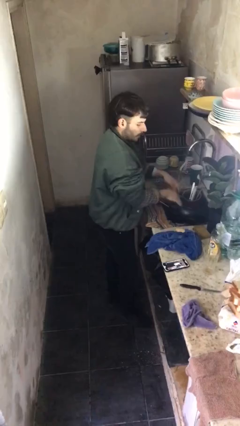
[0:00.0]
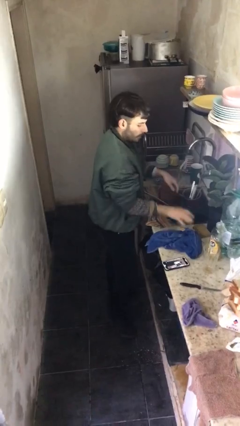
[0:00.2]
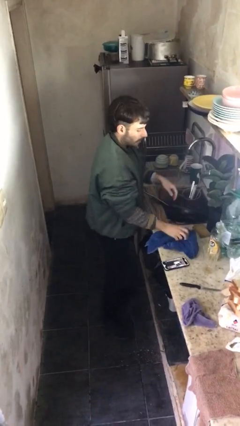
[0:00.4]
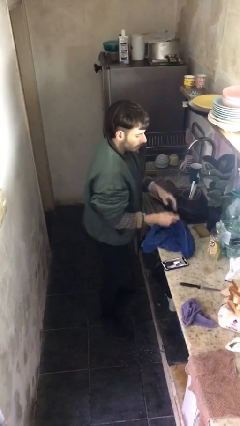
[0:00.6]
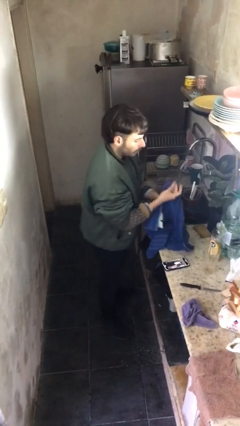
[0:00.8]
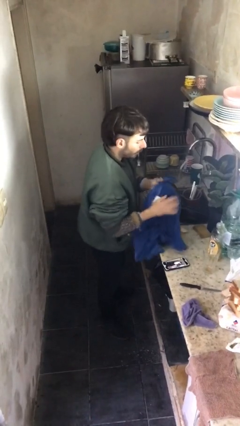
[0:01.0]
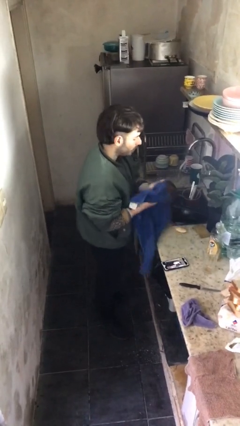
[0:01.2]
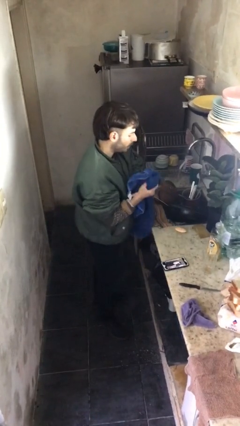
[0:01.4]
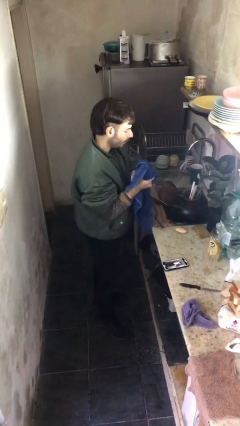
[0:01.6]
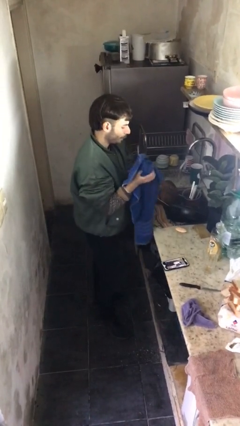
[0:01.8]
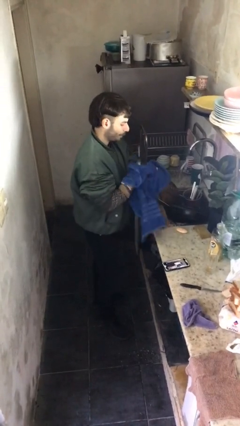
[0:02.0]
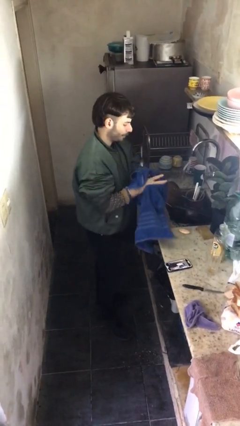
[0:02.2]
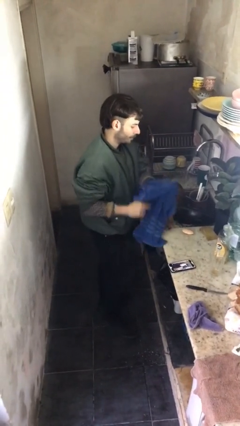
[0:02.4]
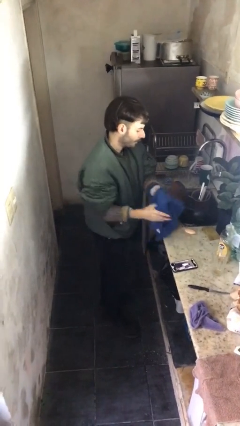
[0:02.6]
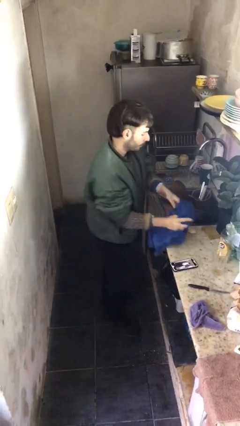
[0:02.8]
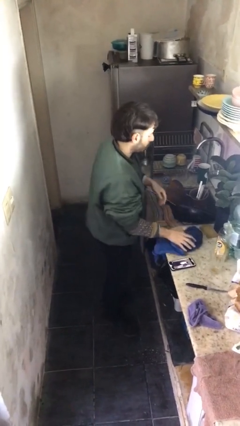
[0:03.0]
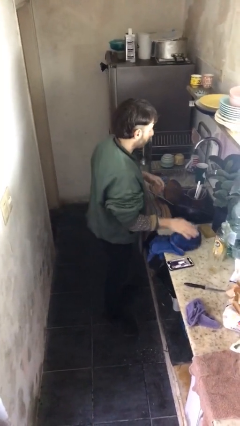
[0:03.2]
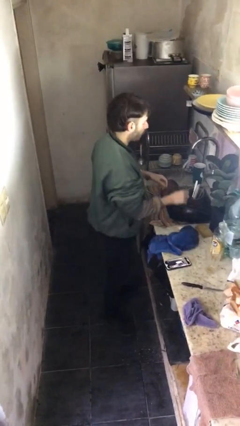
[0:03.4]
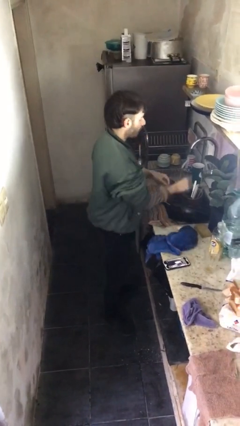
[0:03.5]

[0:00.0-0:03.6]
person dries hands with towel

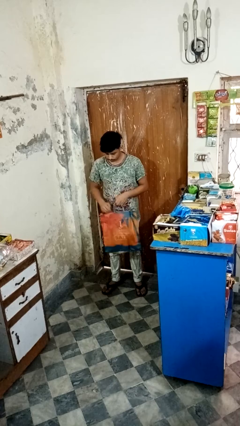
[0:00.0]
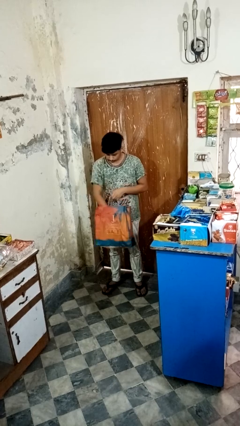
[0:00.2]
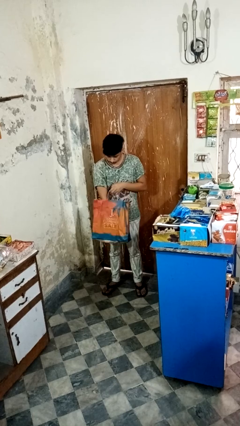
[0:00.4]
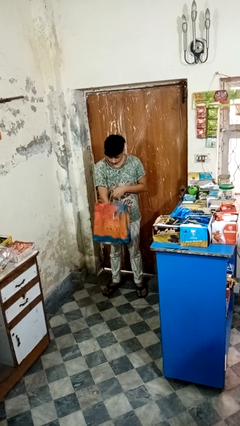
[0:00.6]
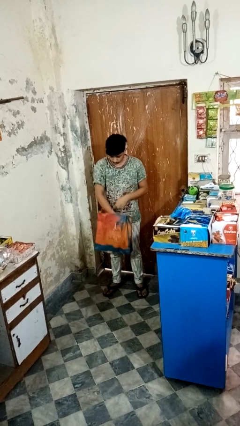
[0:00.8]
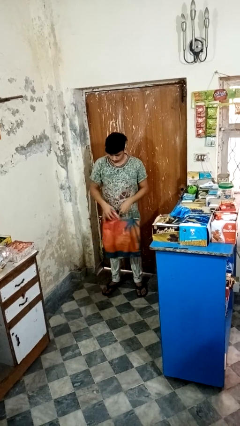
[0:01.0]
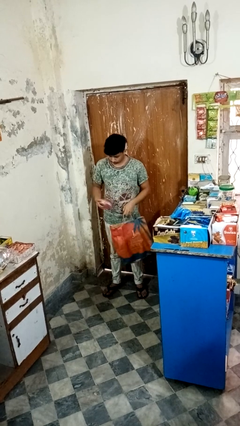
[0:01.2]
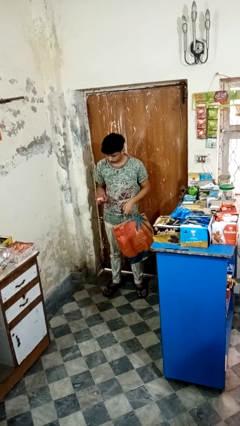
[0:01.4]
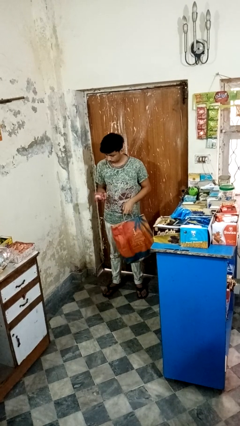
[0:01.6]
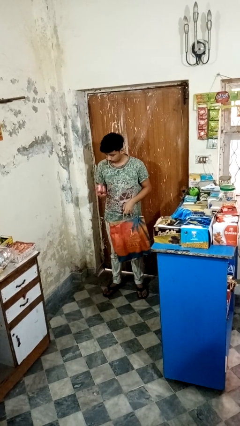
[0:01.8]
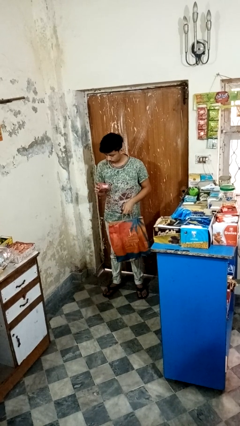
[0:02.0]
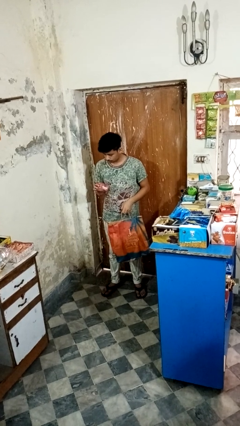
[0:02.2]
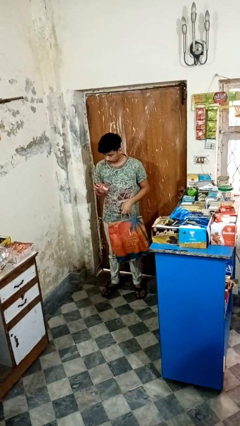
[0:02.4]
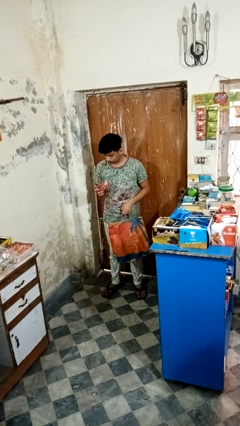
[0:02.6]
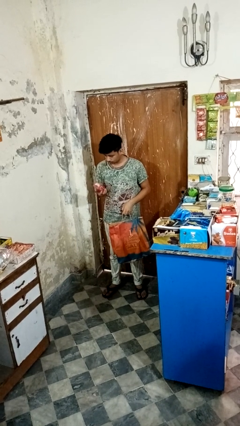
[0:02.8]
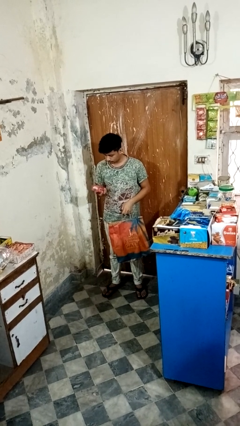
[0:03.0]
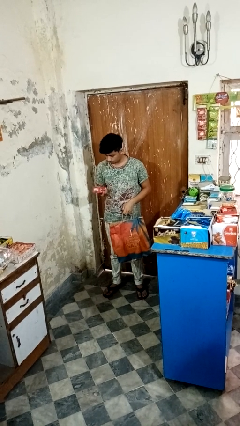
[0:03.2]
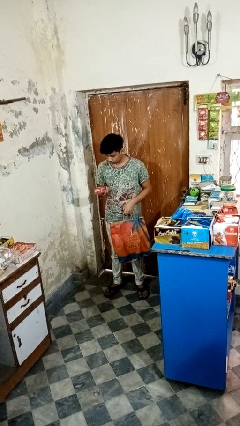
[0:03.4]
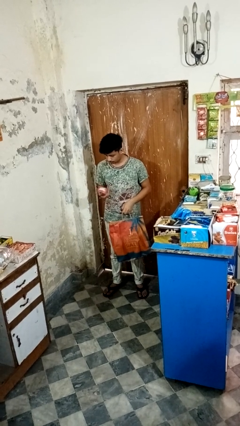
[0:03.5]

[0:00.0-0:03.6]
person takes object from bag

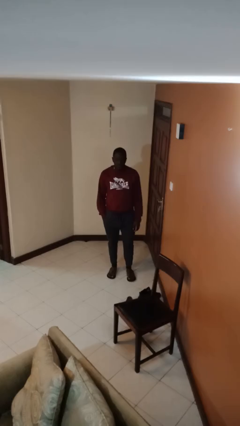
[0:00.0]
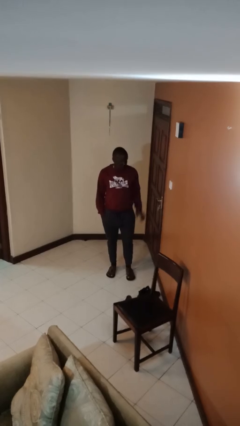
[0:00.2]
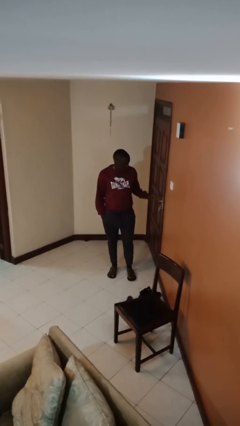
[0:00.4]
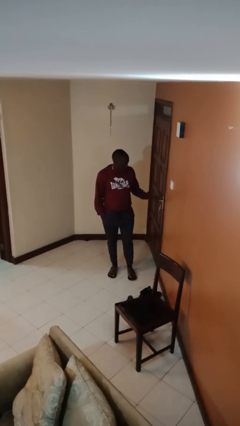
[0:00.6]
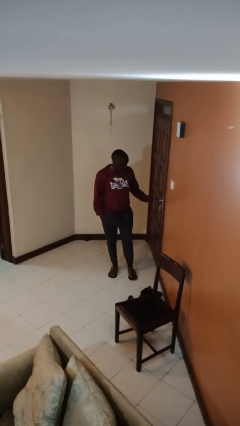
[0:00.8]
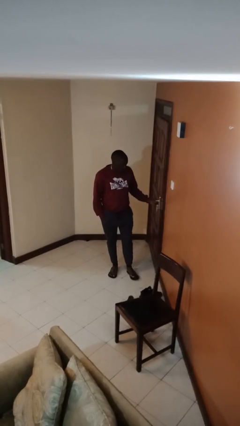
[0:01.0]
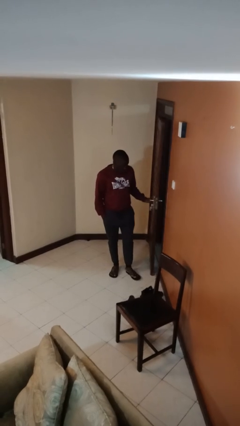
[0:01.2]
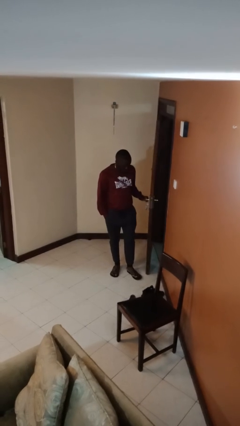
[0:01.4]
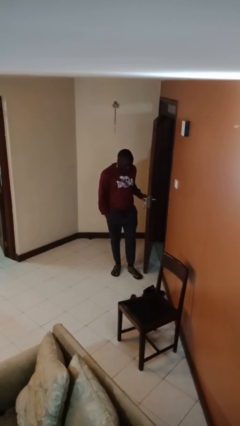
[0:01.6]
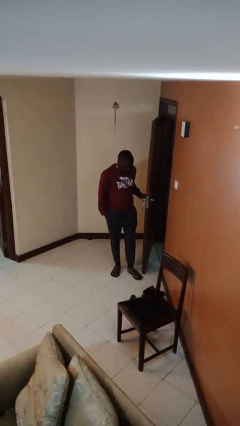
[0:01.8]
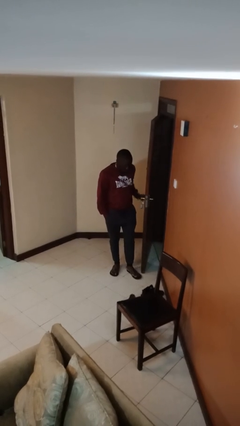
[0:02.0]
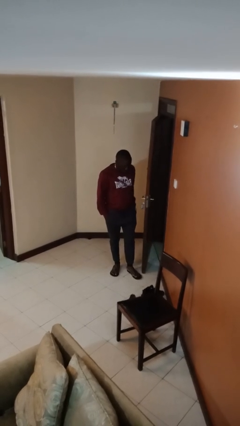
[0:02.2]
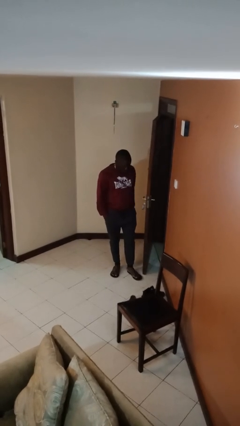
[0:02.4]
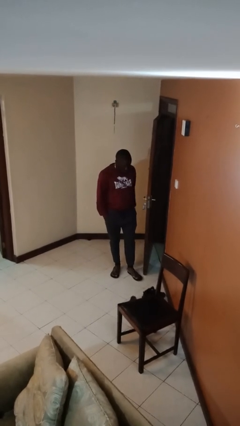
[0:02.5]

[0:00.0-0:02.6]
person opens facility door

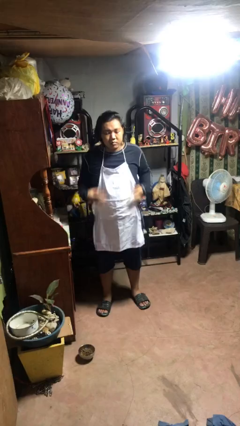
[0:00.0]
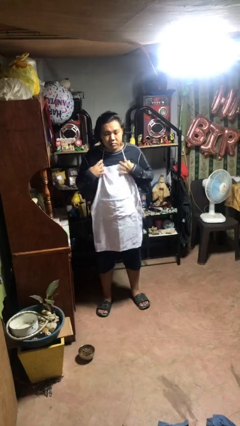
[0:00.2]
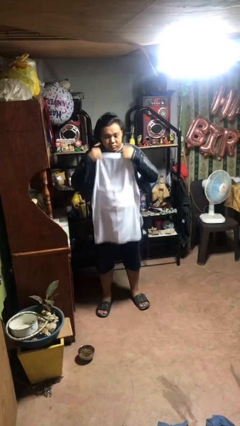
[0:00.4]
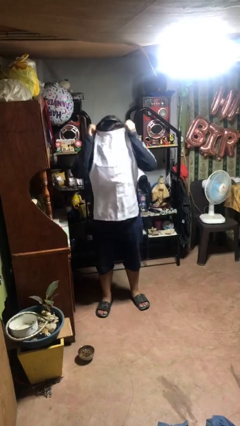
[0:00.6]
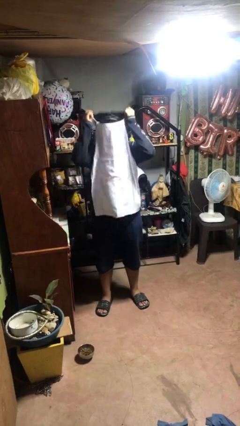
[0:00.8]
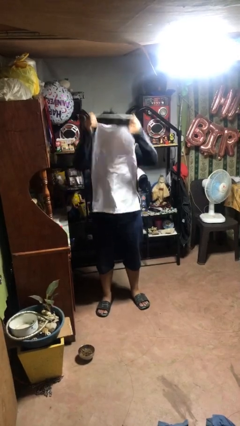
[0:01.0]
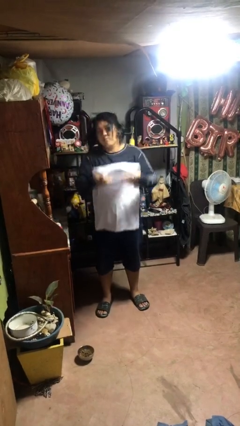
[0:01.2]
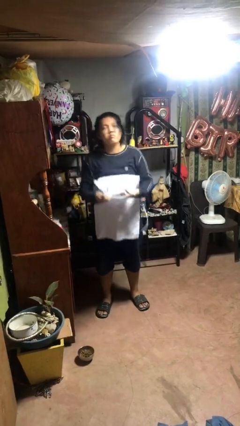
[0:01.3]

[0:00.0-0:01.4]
person takes off apron

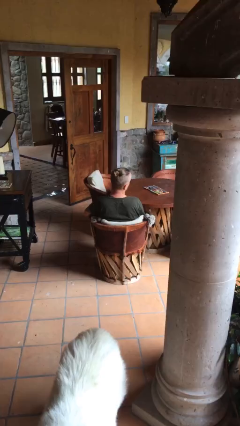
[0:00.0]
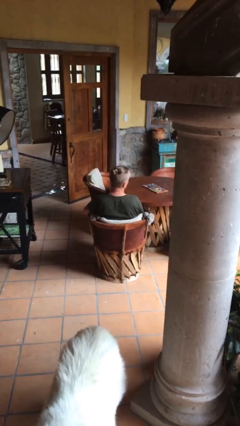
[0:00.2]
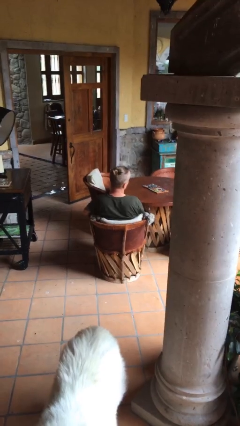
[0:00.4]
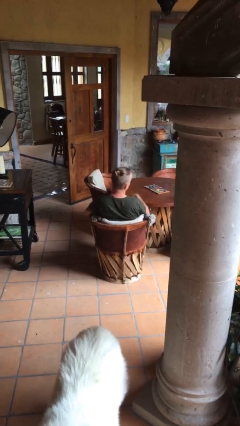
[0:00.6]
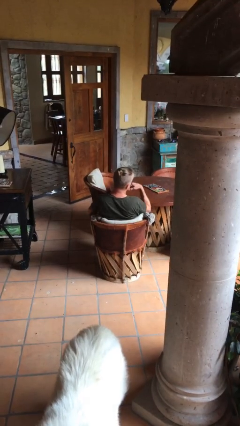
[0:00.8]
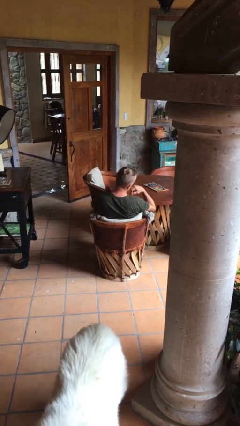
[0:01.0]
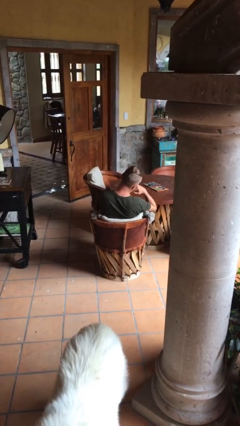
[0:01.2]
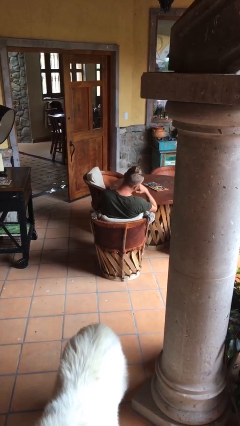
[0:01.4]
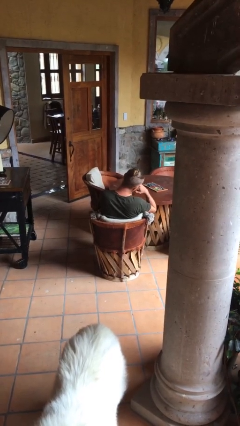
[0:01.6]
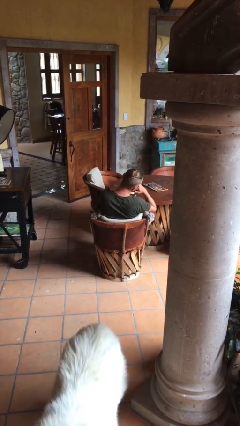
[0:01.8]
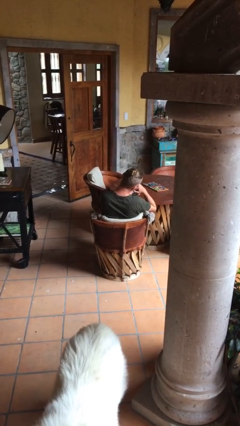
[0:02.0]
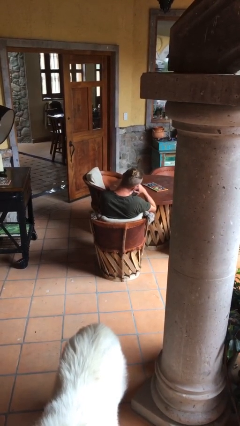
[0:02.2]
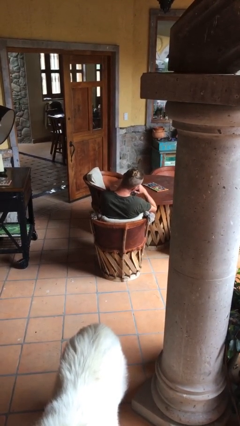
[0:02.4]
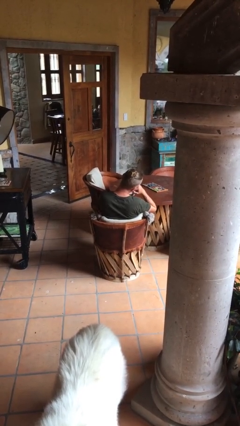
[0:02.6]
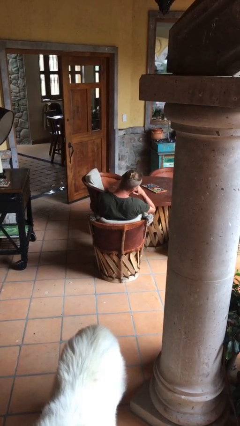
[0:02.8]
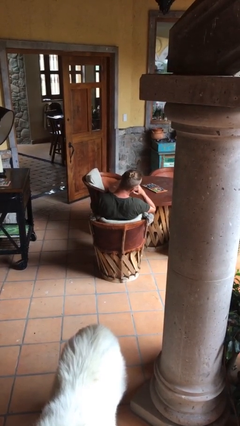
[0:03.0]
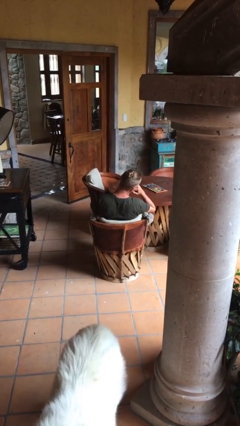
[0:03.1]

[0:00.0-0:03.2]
person uses television remote

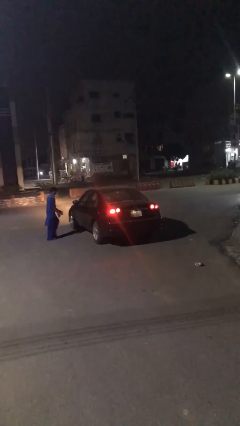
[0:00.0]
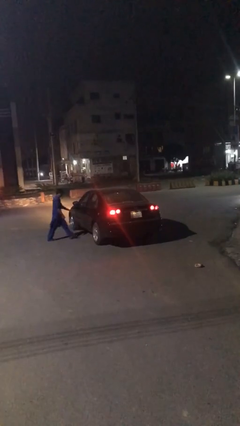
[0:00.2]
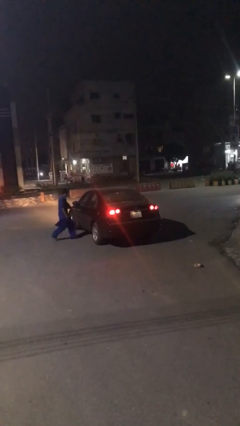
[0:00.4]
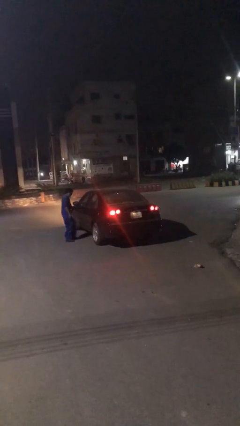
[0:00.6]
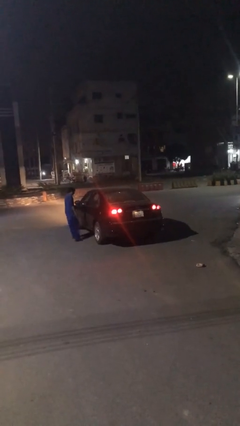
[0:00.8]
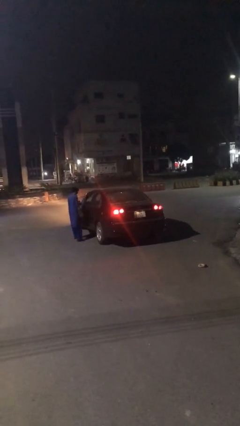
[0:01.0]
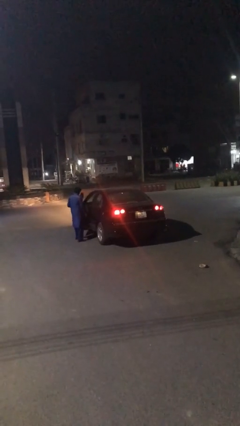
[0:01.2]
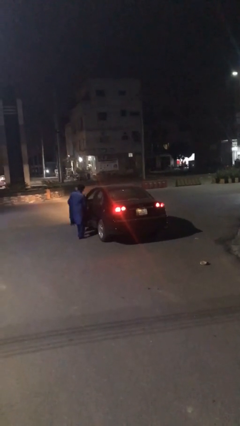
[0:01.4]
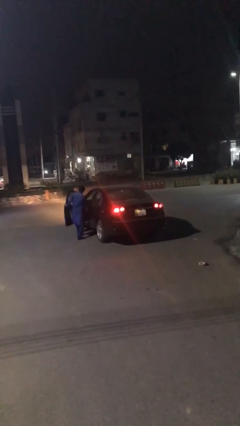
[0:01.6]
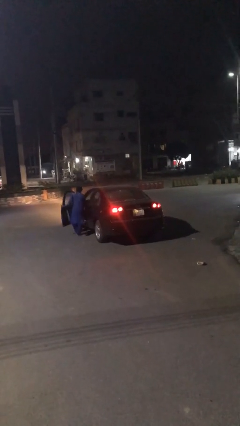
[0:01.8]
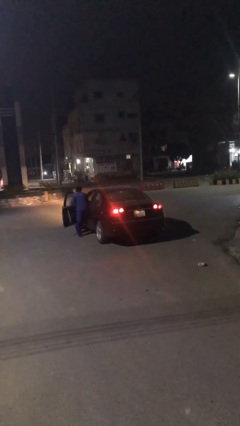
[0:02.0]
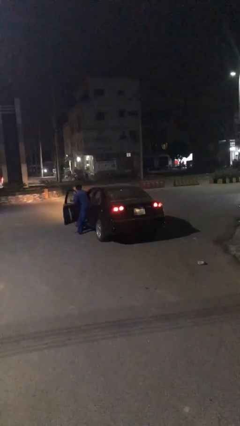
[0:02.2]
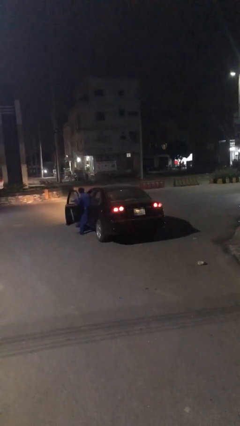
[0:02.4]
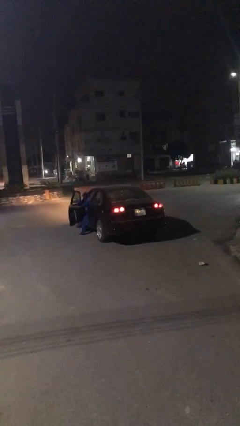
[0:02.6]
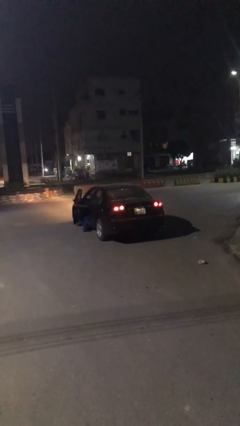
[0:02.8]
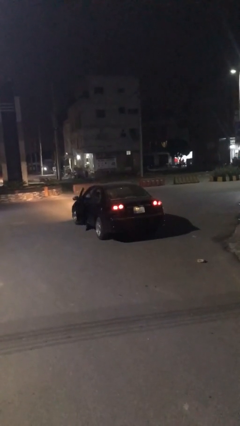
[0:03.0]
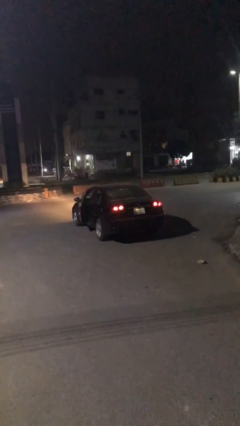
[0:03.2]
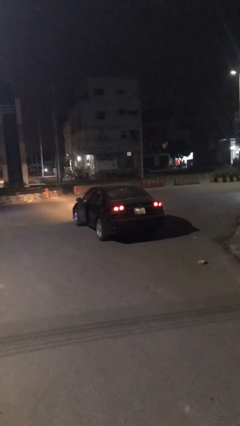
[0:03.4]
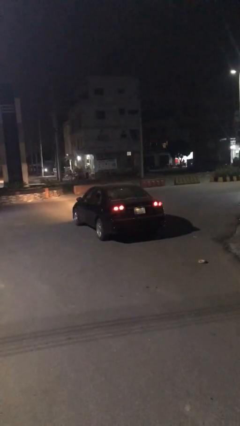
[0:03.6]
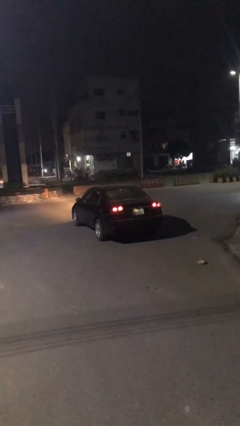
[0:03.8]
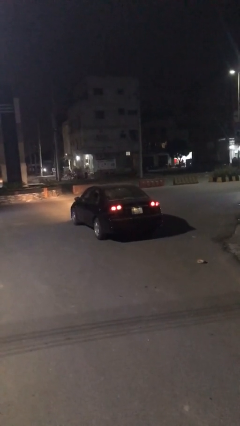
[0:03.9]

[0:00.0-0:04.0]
car picks up person
